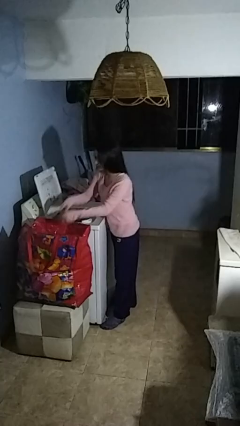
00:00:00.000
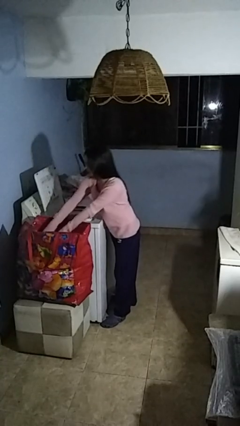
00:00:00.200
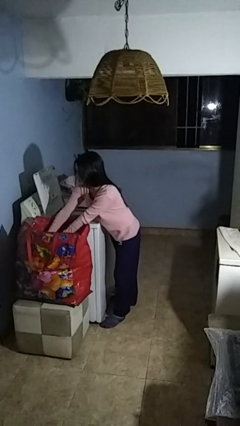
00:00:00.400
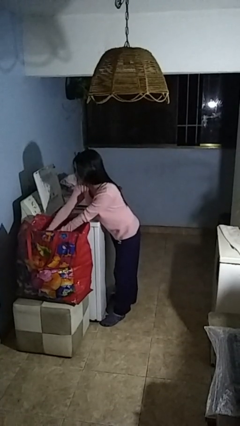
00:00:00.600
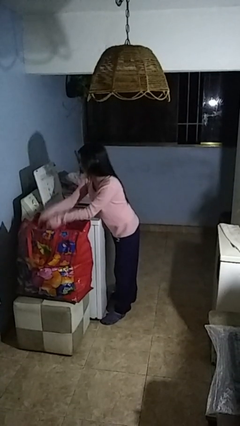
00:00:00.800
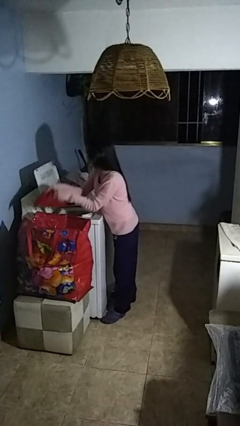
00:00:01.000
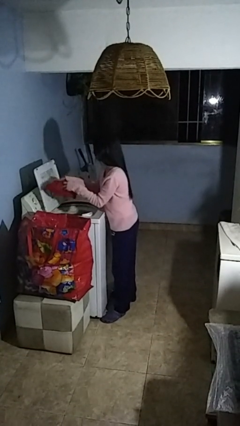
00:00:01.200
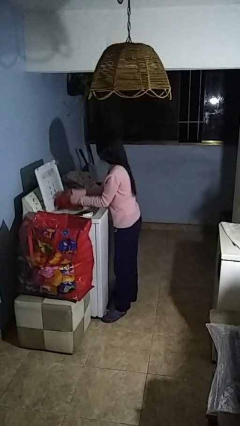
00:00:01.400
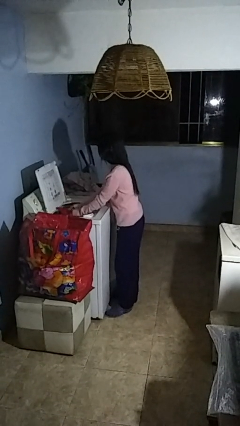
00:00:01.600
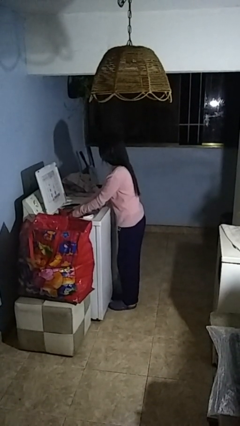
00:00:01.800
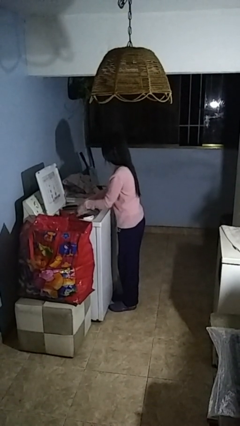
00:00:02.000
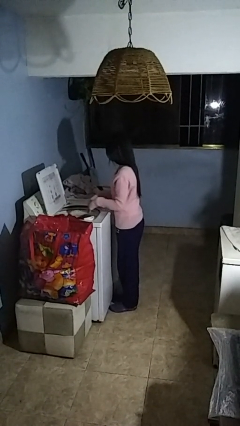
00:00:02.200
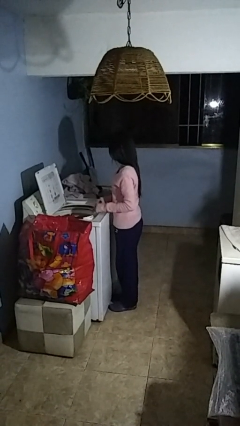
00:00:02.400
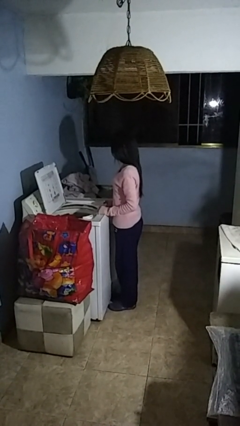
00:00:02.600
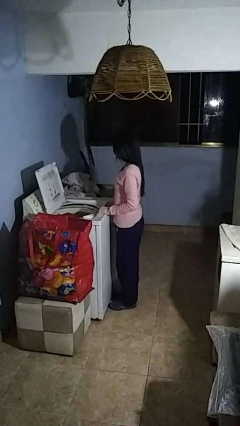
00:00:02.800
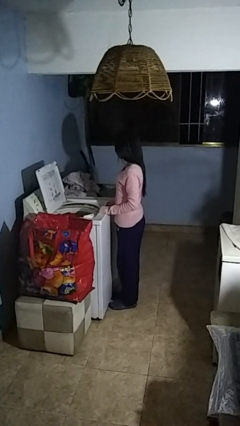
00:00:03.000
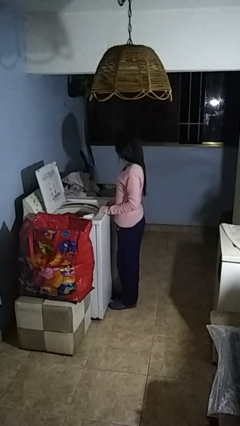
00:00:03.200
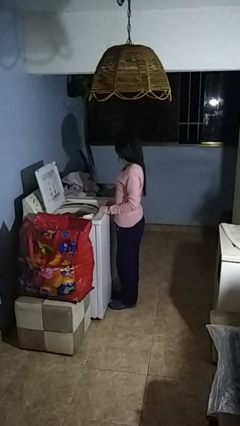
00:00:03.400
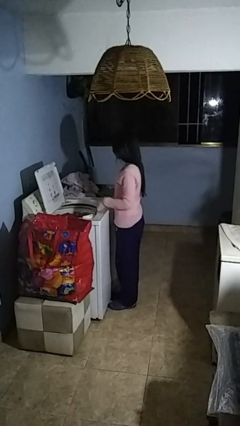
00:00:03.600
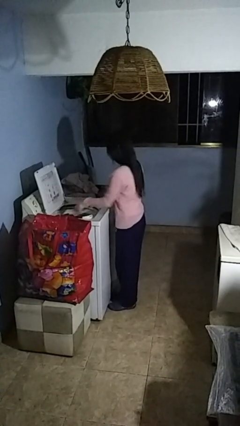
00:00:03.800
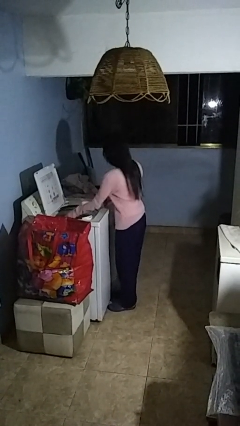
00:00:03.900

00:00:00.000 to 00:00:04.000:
person loads clotheswasher

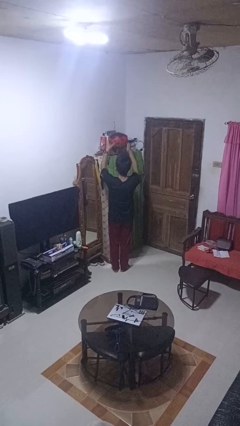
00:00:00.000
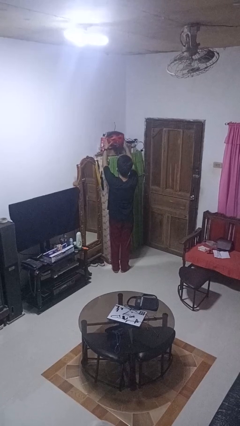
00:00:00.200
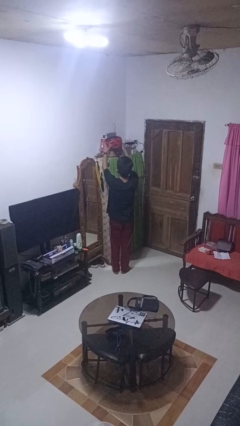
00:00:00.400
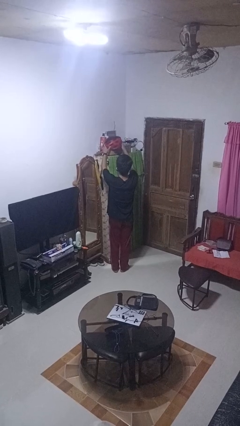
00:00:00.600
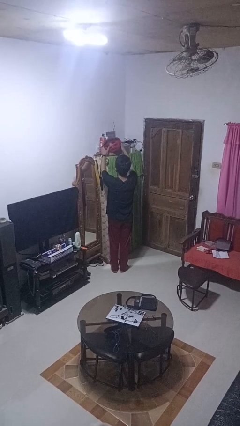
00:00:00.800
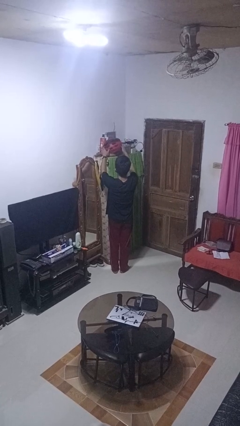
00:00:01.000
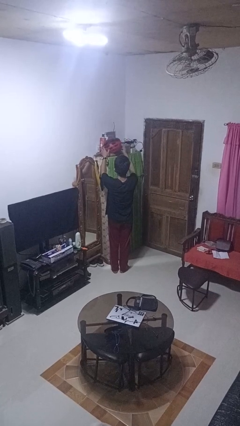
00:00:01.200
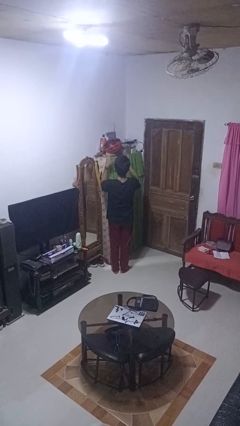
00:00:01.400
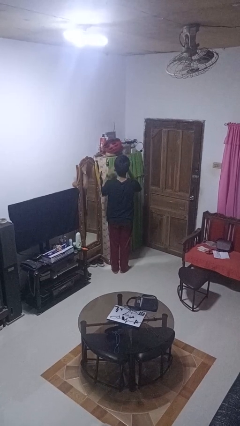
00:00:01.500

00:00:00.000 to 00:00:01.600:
person puts down object on shelf

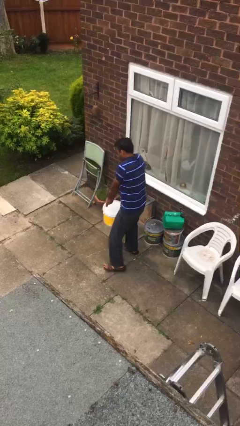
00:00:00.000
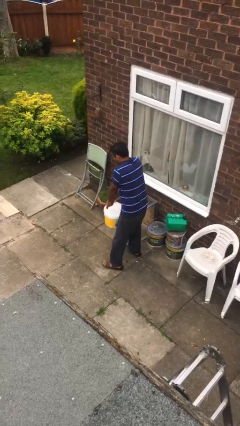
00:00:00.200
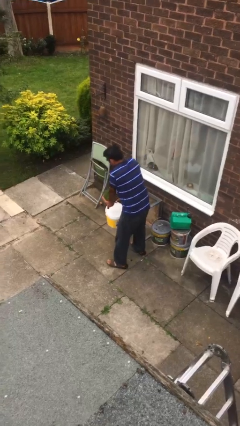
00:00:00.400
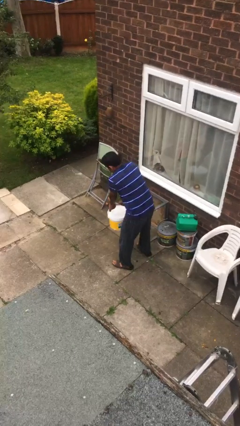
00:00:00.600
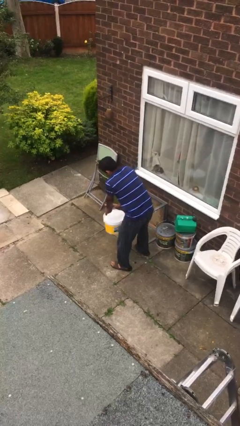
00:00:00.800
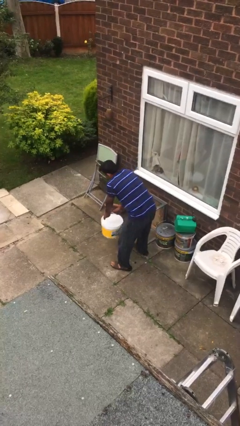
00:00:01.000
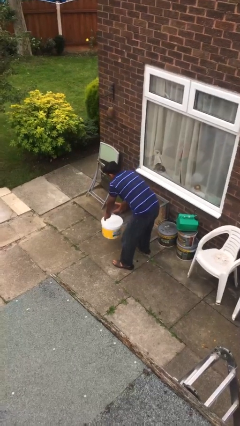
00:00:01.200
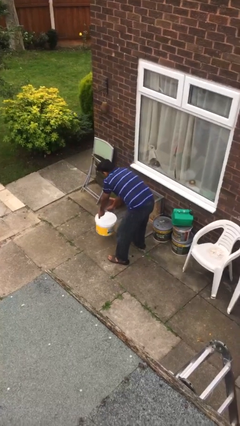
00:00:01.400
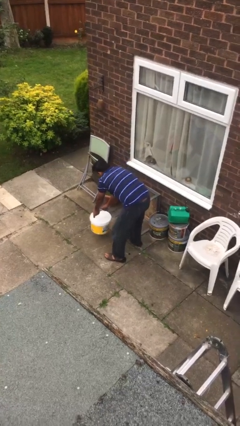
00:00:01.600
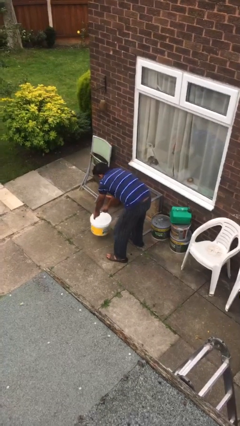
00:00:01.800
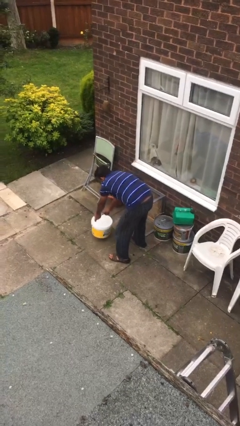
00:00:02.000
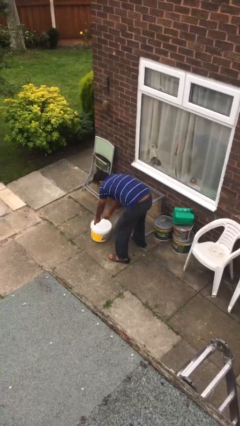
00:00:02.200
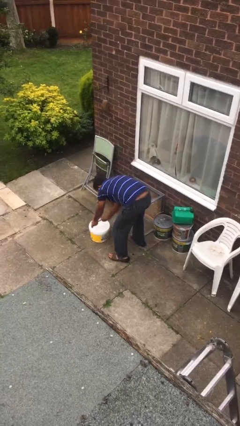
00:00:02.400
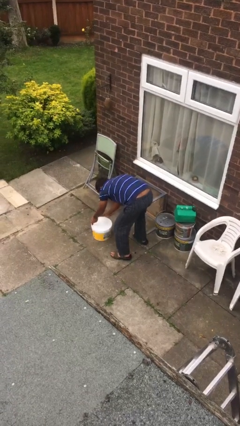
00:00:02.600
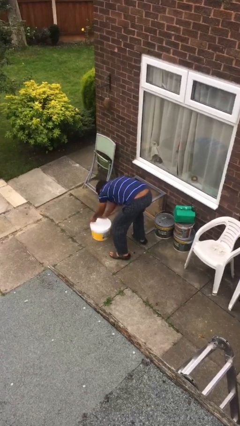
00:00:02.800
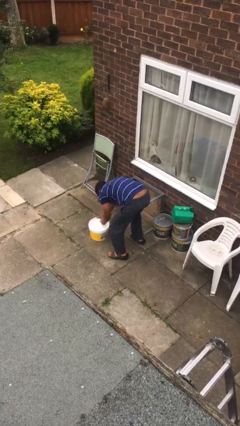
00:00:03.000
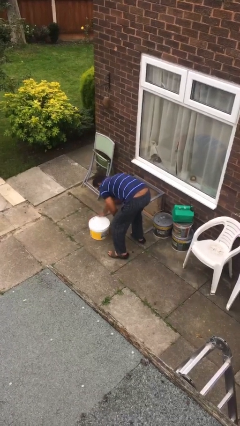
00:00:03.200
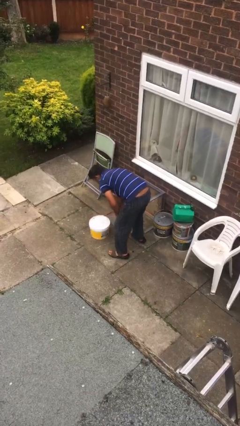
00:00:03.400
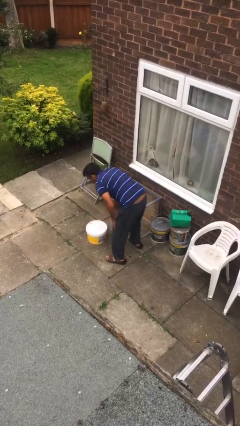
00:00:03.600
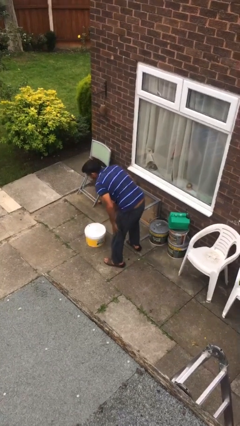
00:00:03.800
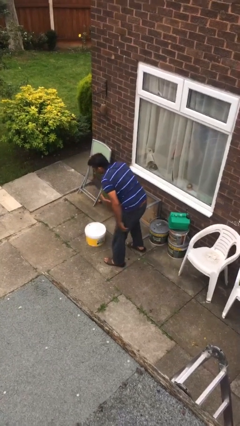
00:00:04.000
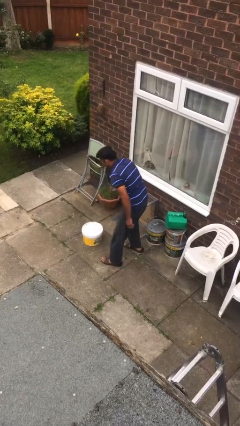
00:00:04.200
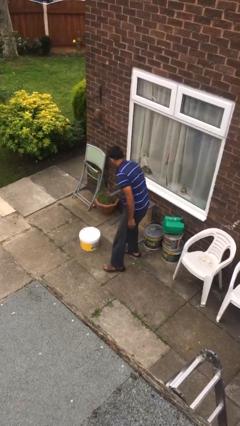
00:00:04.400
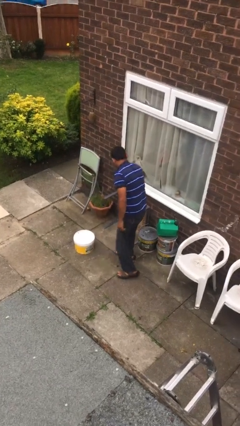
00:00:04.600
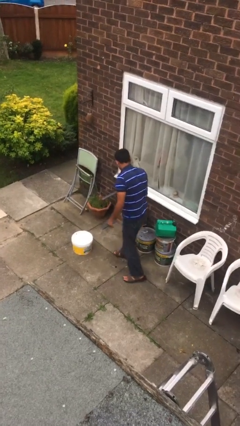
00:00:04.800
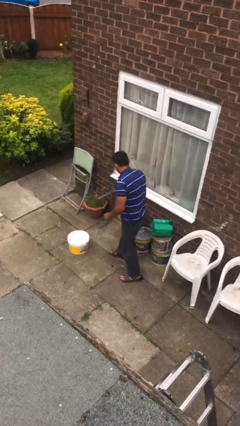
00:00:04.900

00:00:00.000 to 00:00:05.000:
person puts down object on floor

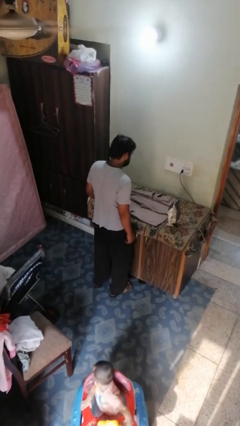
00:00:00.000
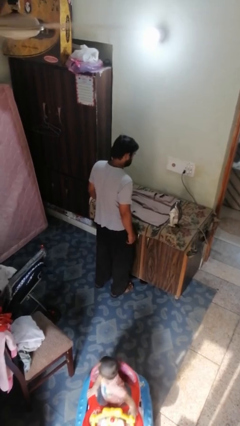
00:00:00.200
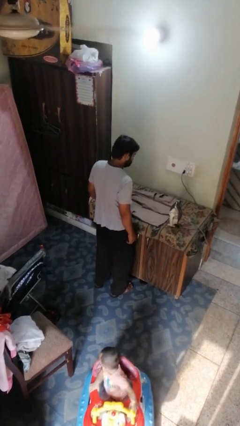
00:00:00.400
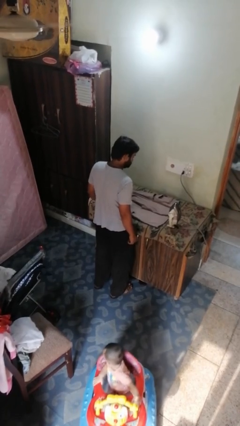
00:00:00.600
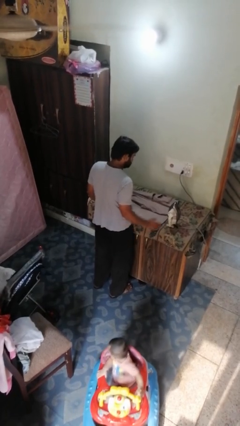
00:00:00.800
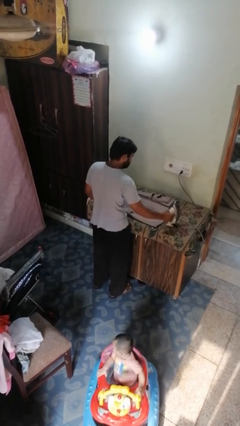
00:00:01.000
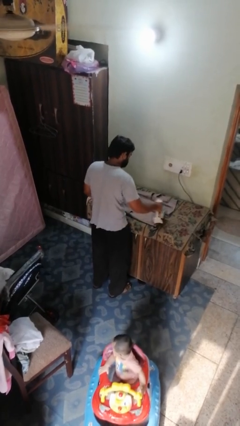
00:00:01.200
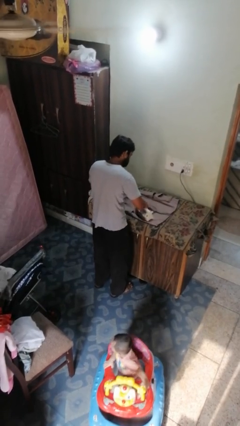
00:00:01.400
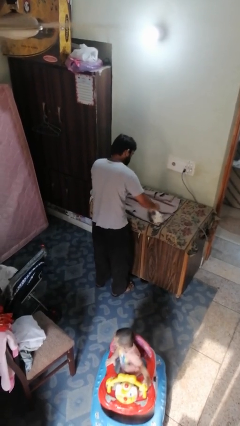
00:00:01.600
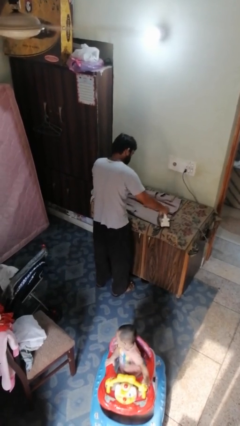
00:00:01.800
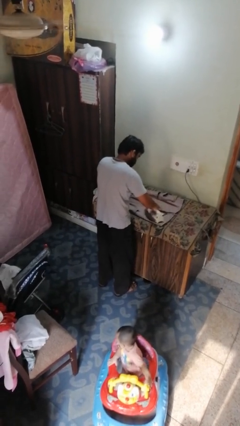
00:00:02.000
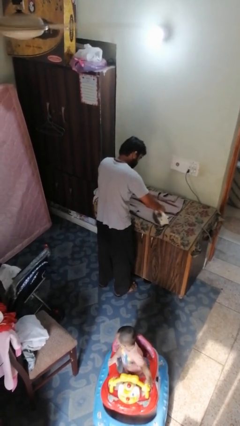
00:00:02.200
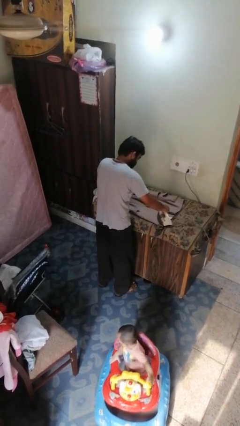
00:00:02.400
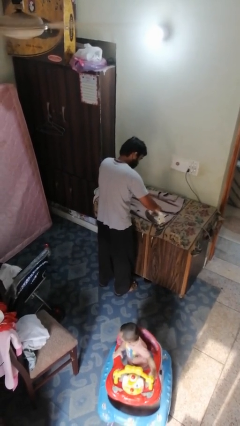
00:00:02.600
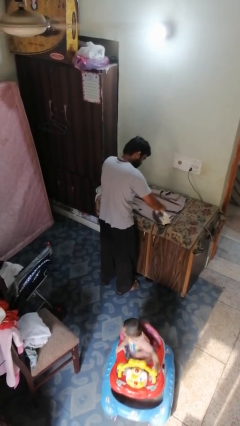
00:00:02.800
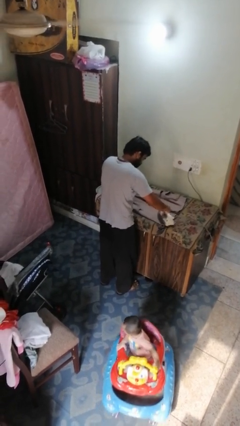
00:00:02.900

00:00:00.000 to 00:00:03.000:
person irons clothes

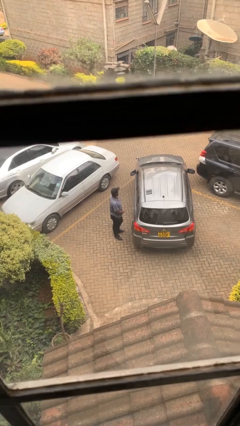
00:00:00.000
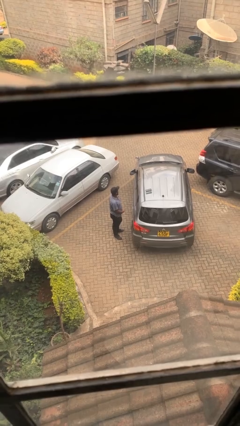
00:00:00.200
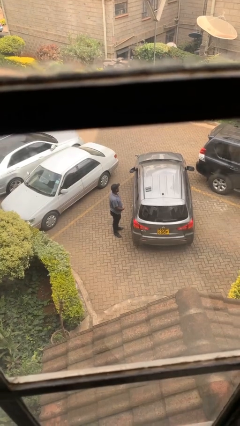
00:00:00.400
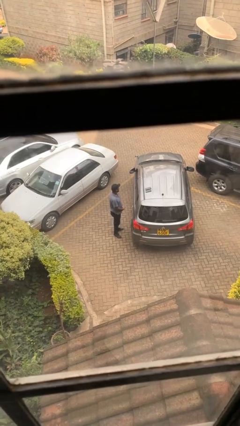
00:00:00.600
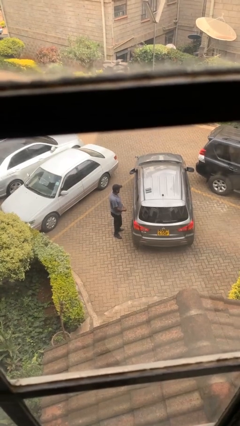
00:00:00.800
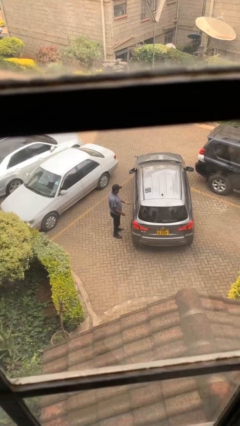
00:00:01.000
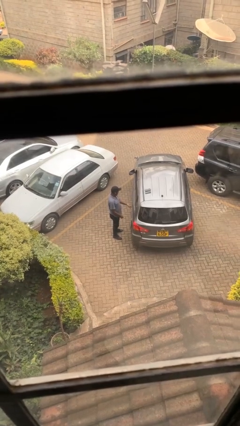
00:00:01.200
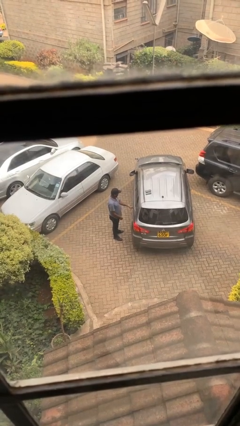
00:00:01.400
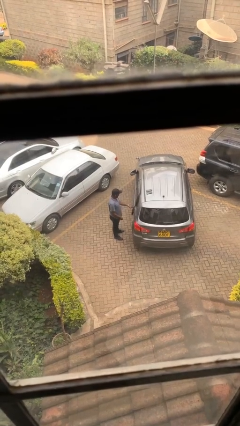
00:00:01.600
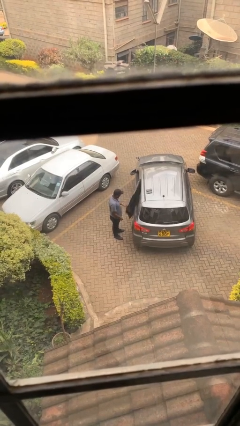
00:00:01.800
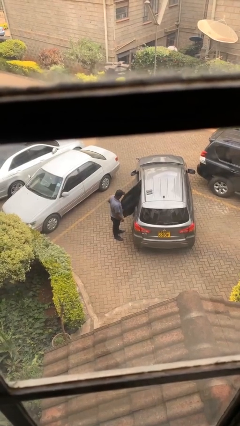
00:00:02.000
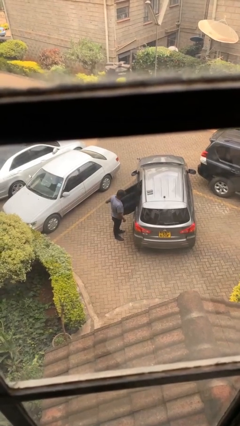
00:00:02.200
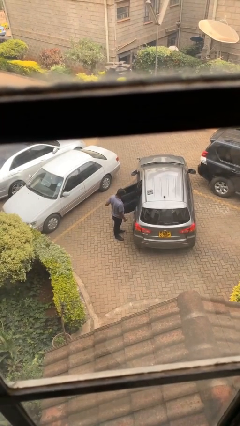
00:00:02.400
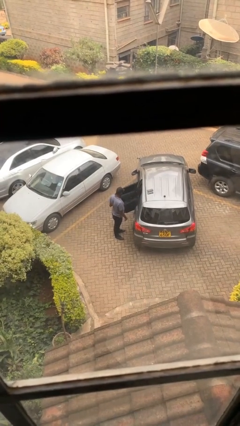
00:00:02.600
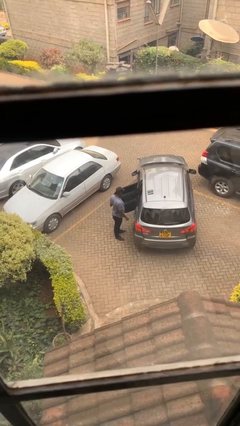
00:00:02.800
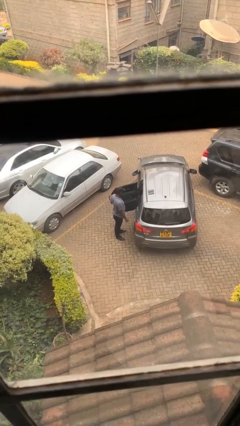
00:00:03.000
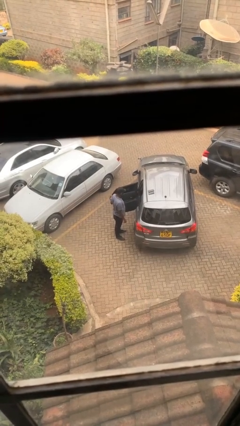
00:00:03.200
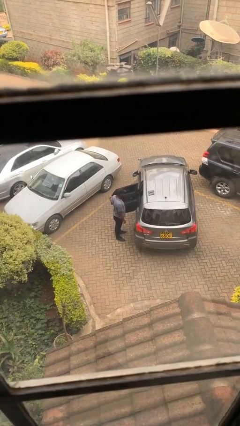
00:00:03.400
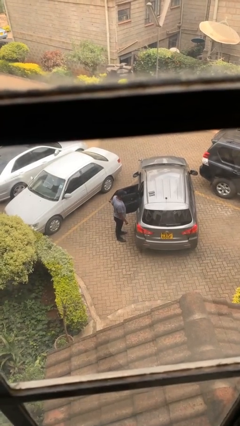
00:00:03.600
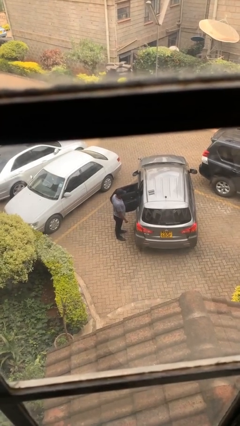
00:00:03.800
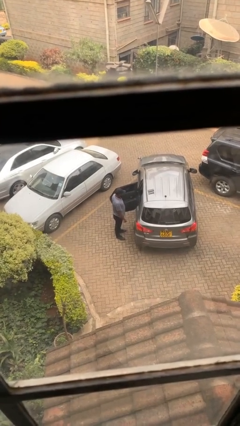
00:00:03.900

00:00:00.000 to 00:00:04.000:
person opens car door

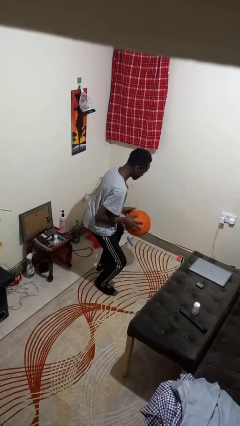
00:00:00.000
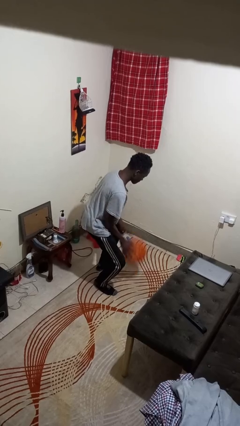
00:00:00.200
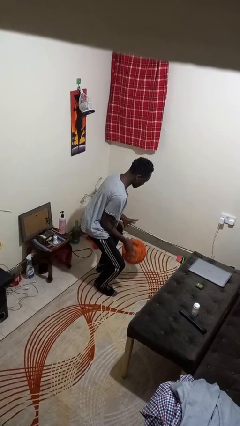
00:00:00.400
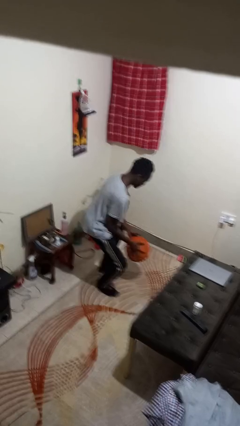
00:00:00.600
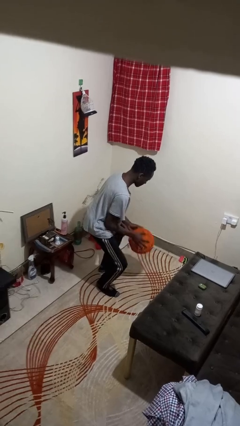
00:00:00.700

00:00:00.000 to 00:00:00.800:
person bounces ball on floor
